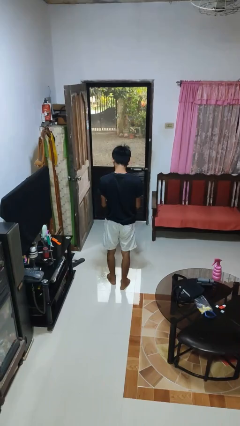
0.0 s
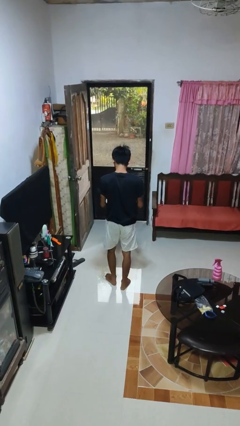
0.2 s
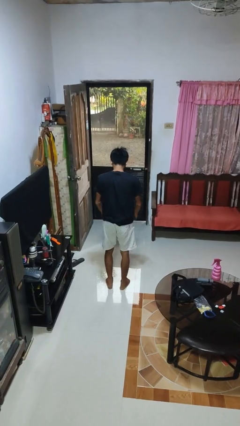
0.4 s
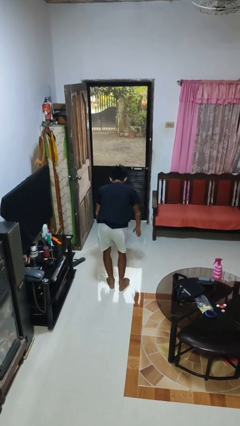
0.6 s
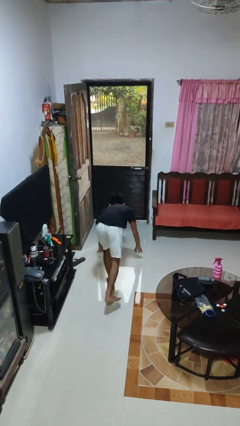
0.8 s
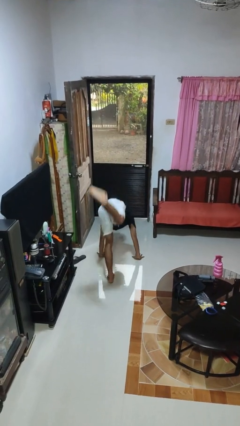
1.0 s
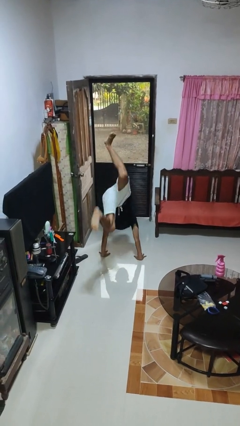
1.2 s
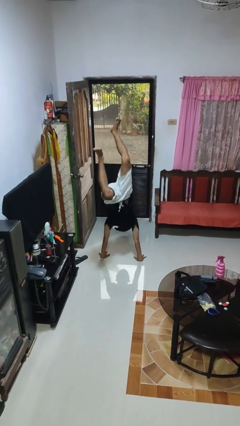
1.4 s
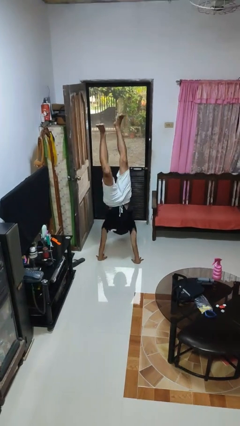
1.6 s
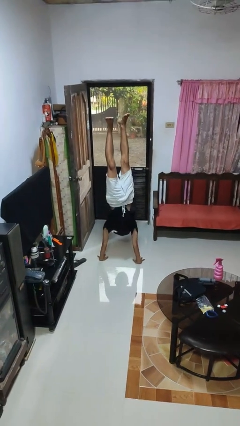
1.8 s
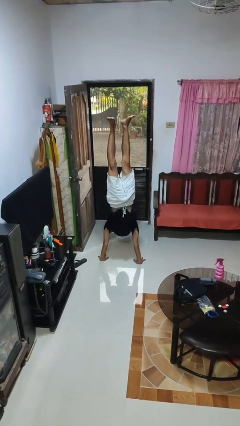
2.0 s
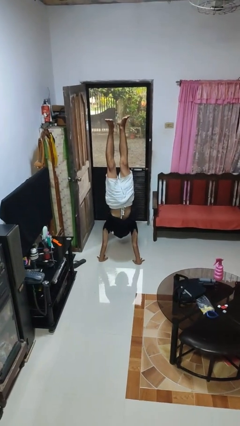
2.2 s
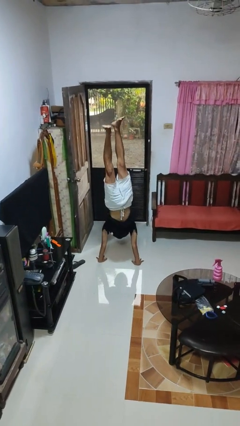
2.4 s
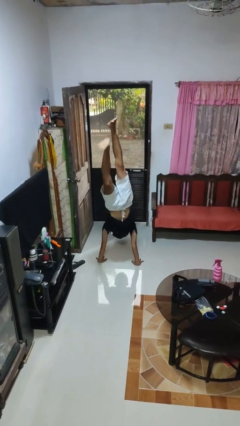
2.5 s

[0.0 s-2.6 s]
person handstand

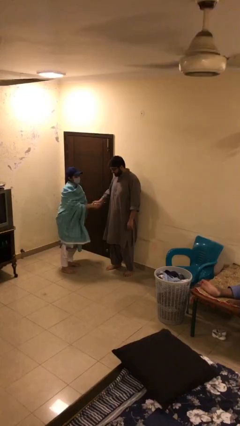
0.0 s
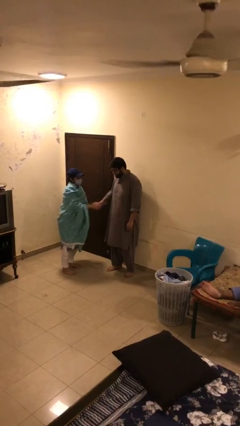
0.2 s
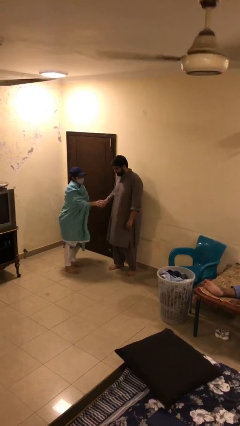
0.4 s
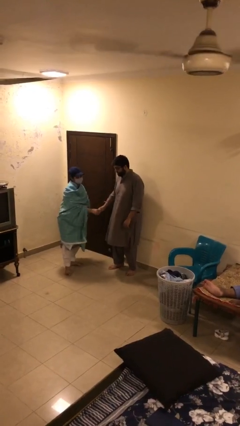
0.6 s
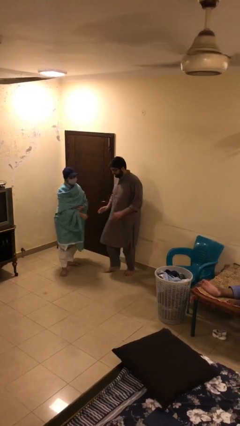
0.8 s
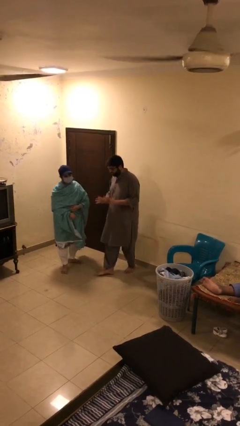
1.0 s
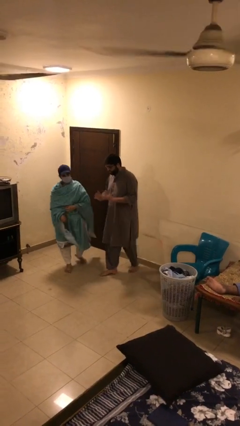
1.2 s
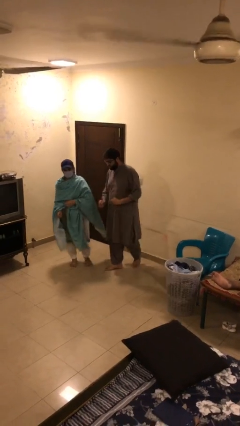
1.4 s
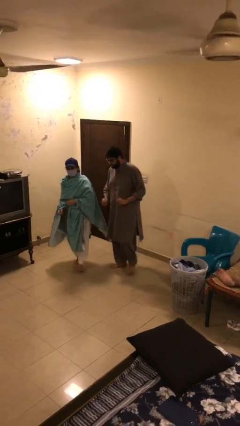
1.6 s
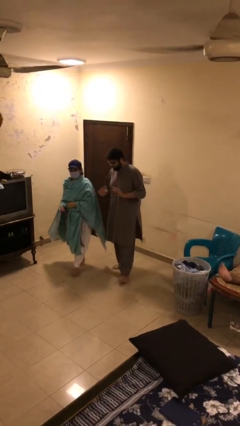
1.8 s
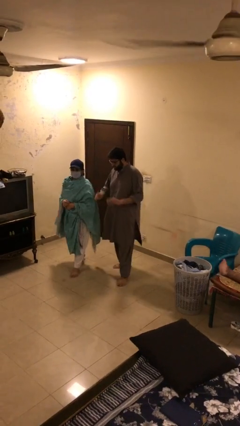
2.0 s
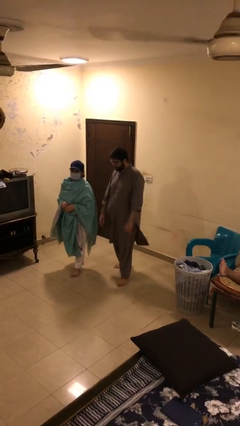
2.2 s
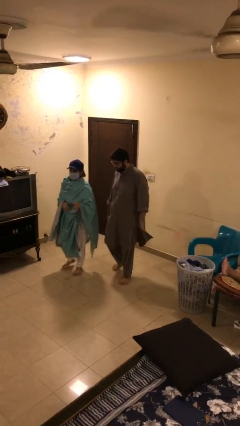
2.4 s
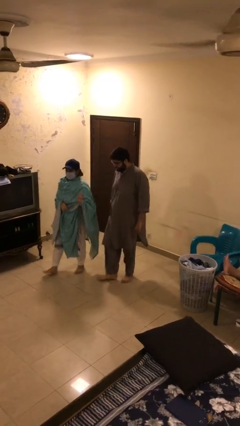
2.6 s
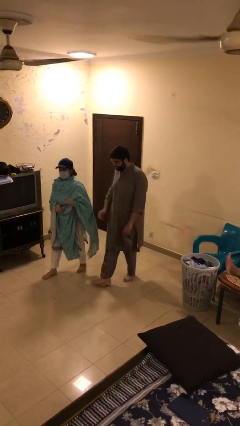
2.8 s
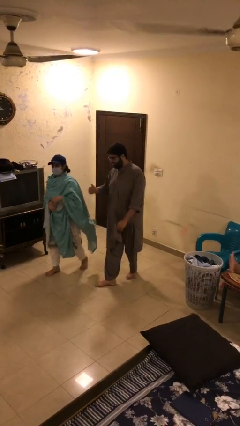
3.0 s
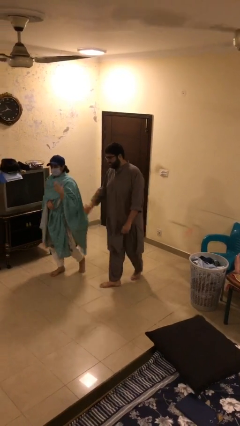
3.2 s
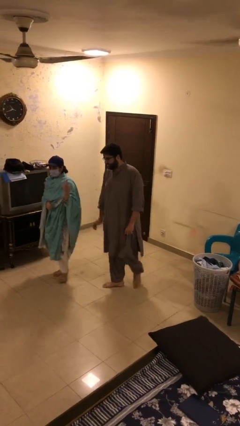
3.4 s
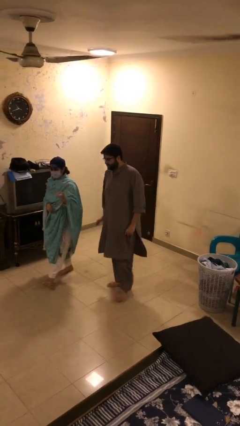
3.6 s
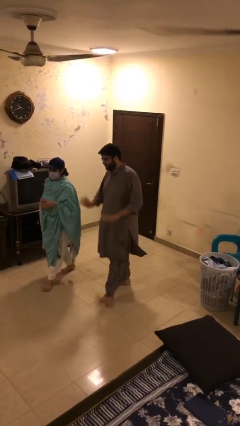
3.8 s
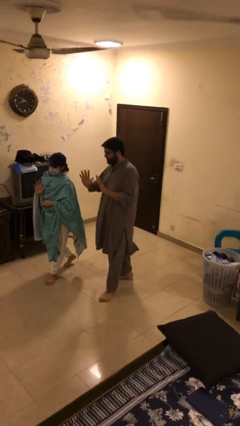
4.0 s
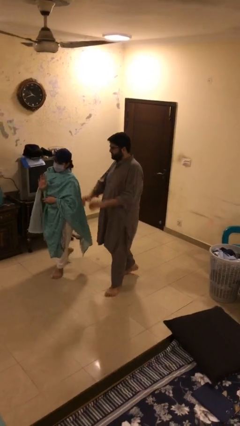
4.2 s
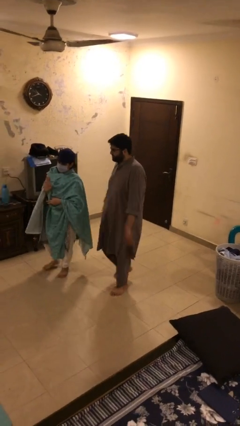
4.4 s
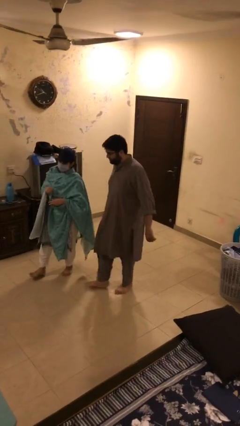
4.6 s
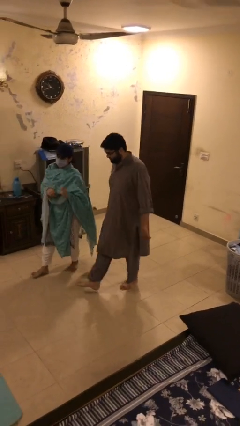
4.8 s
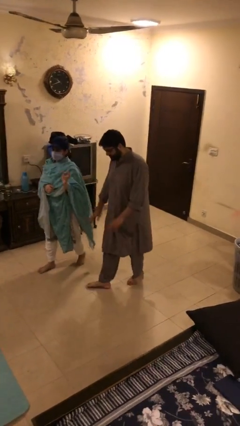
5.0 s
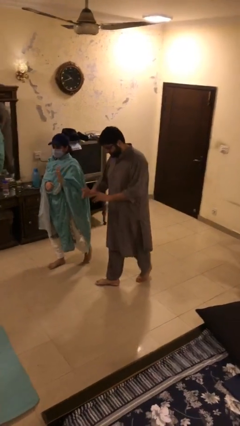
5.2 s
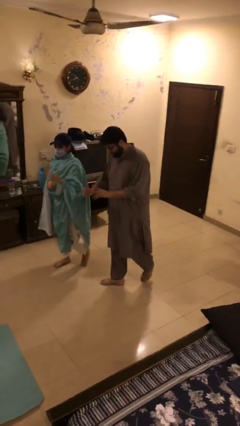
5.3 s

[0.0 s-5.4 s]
person talks to person

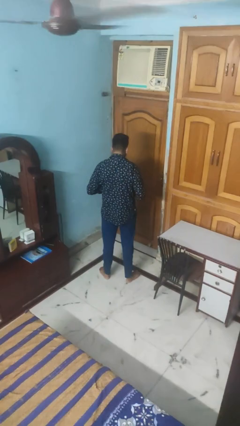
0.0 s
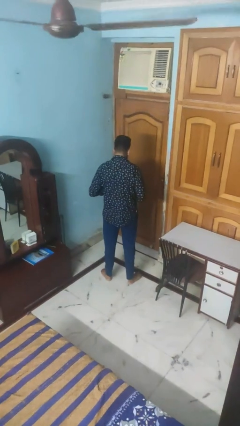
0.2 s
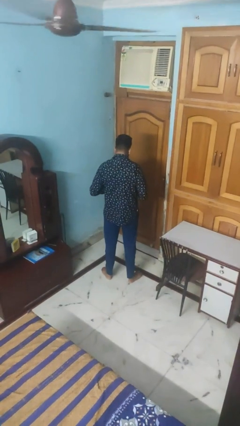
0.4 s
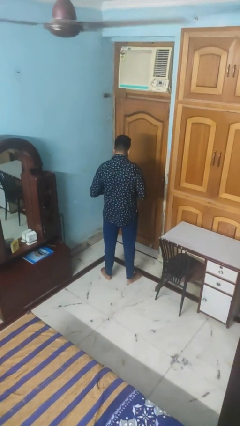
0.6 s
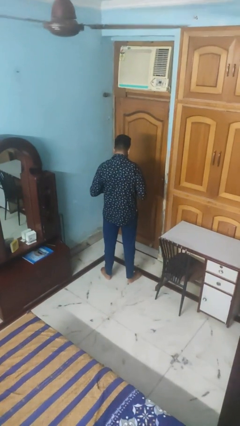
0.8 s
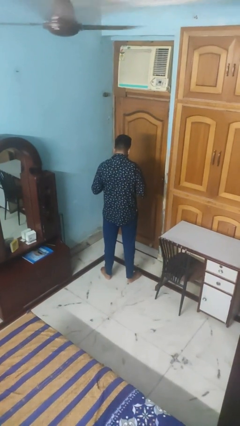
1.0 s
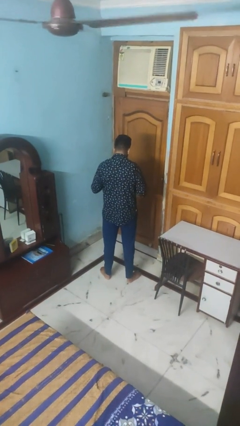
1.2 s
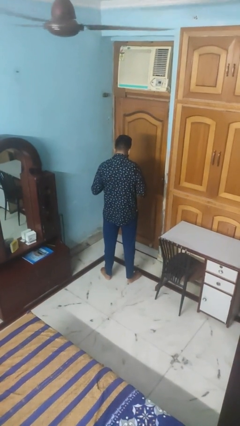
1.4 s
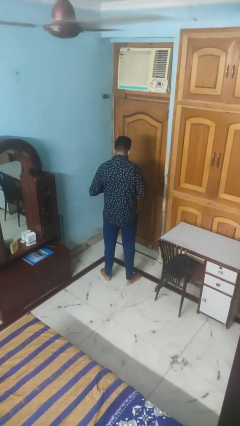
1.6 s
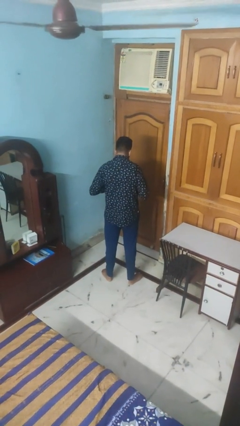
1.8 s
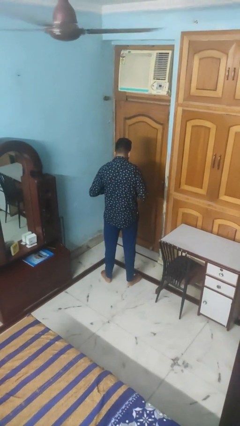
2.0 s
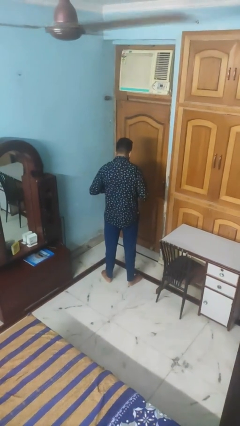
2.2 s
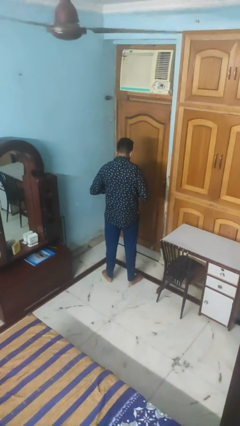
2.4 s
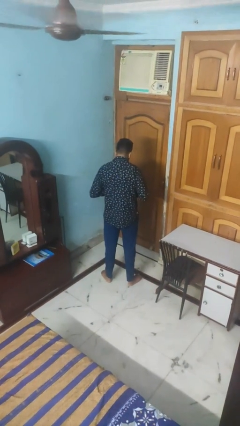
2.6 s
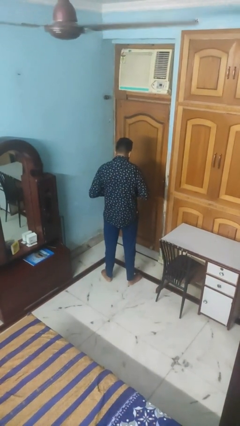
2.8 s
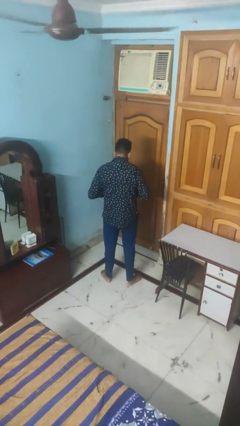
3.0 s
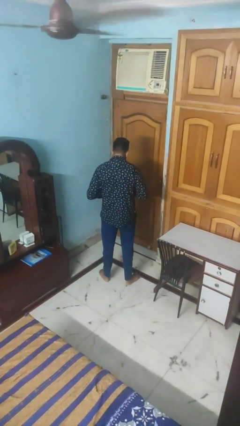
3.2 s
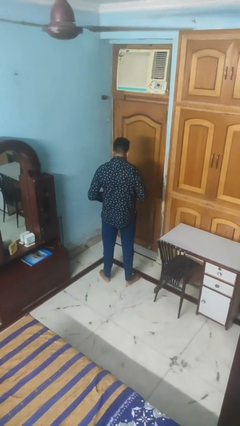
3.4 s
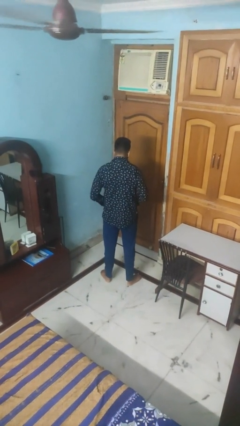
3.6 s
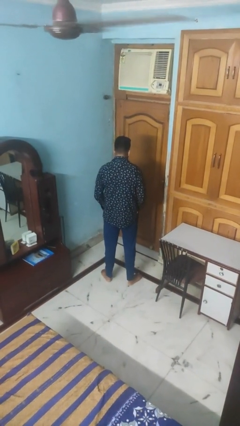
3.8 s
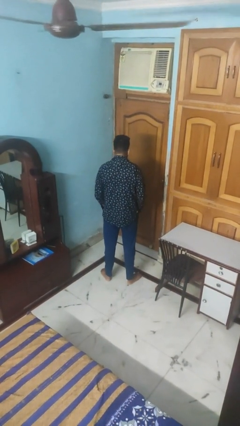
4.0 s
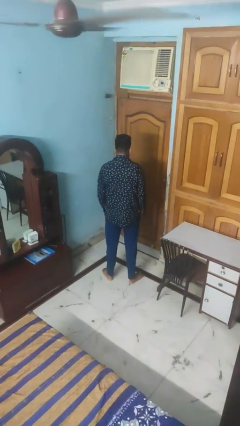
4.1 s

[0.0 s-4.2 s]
person unbuttons shirt

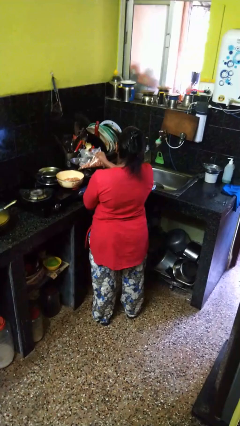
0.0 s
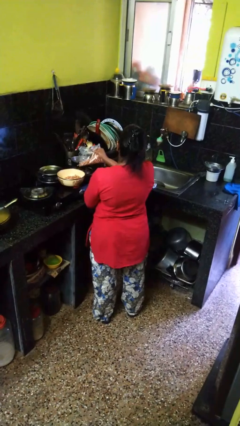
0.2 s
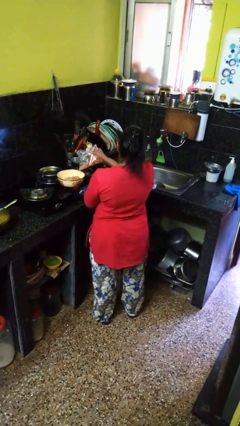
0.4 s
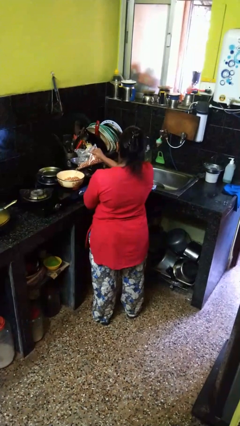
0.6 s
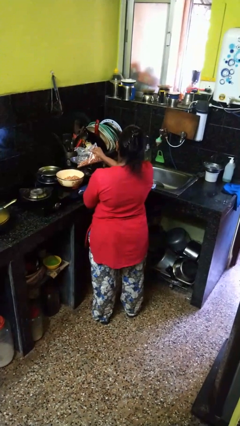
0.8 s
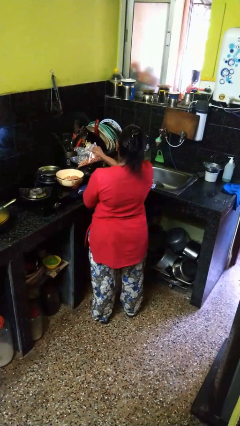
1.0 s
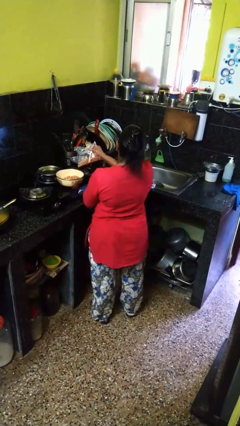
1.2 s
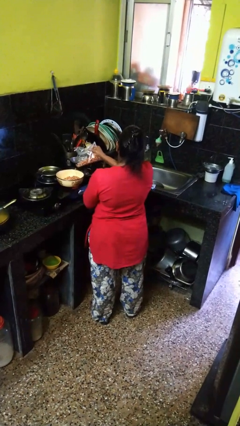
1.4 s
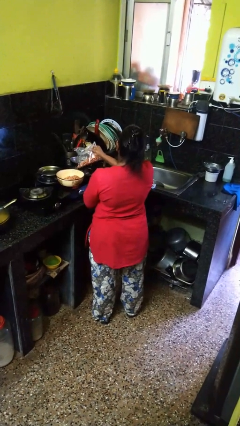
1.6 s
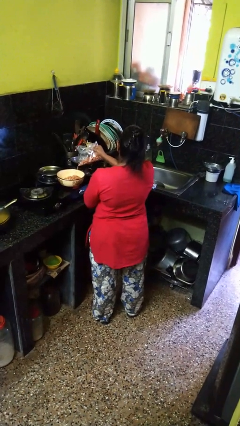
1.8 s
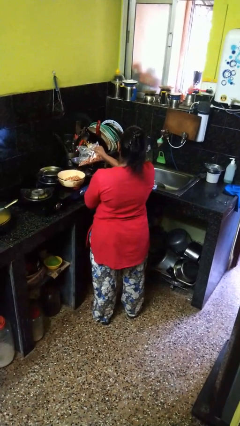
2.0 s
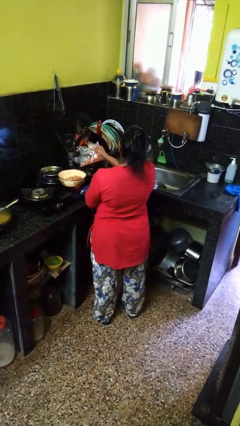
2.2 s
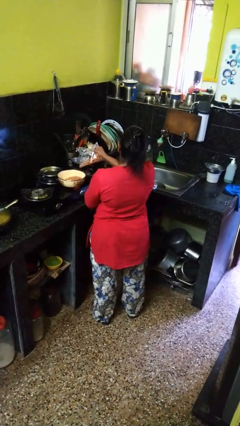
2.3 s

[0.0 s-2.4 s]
person pours into bowl

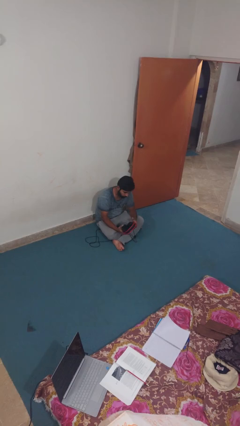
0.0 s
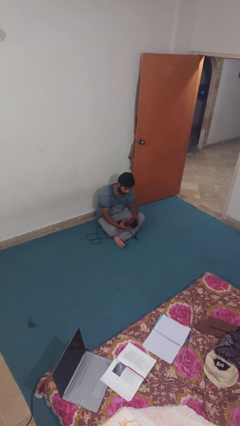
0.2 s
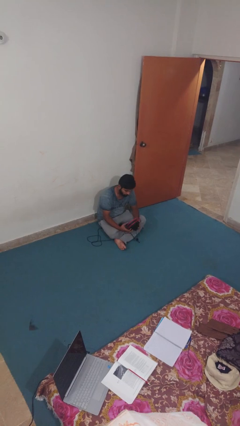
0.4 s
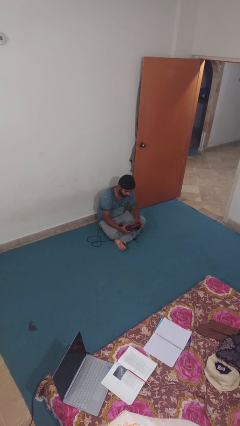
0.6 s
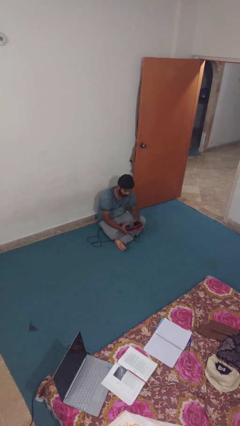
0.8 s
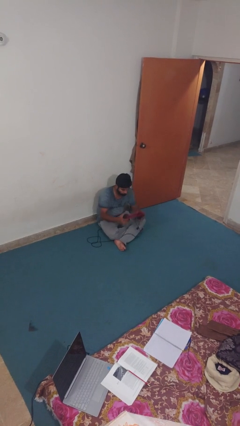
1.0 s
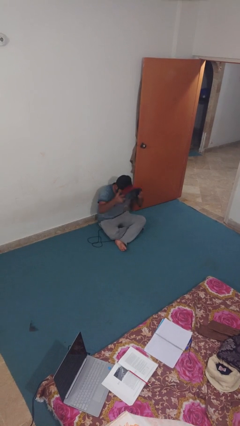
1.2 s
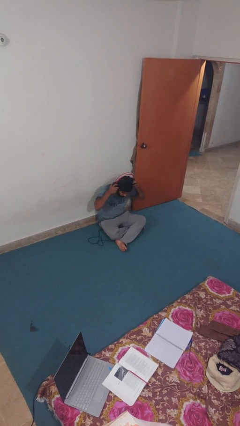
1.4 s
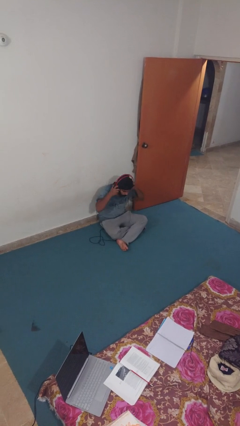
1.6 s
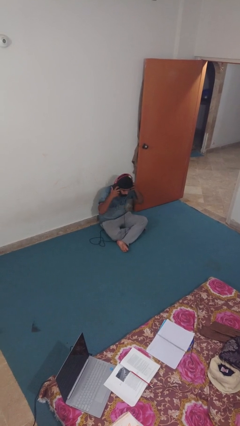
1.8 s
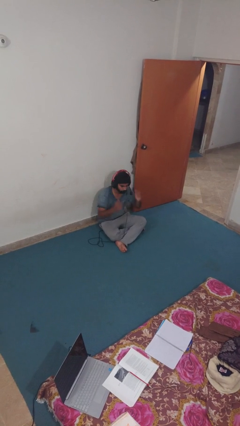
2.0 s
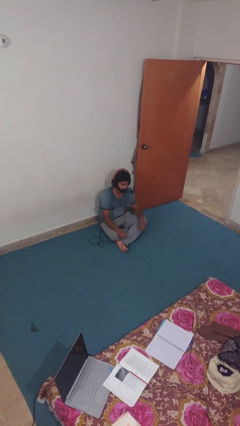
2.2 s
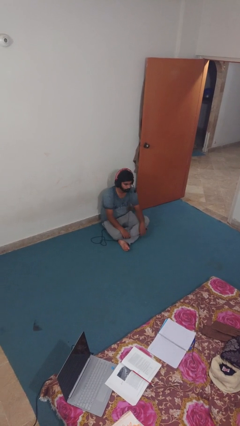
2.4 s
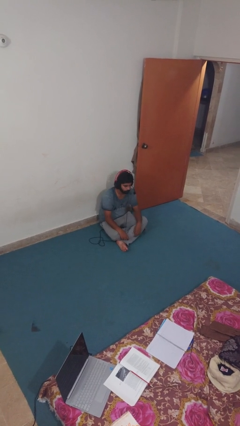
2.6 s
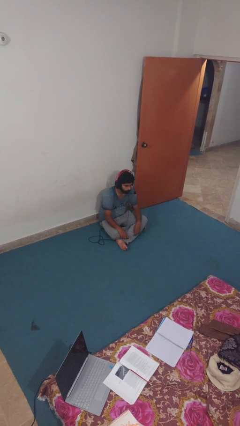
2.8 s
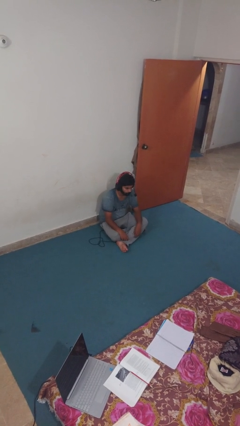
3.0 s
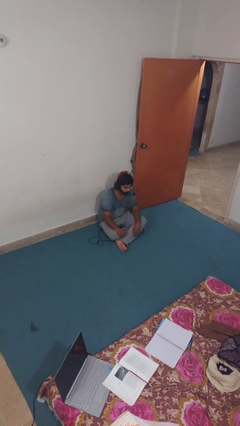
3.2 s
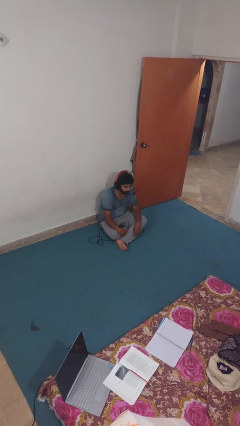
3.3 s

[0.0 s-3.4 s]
person puts on headphones
